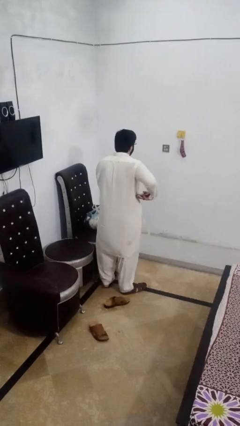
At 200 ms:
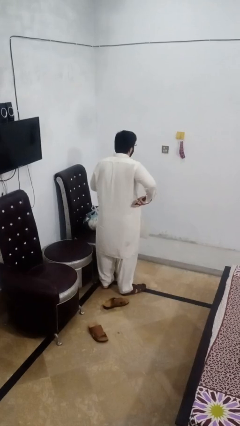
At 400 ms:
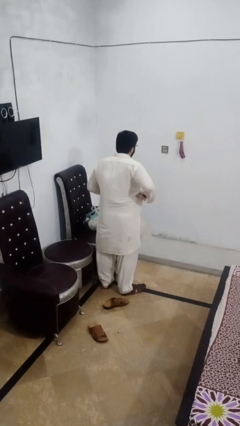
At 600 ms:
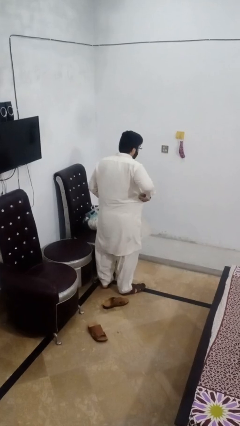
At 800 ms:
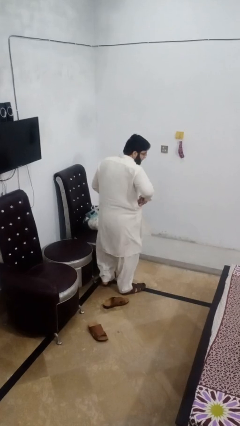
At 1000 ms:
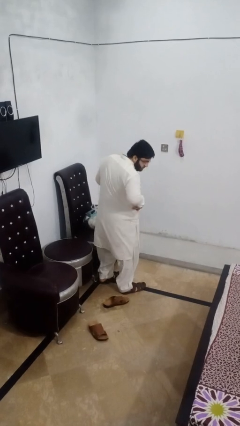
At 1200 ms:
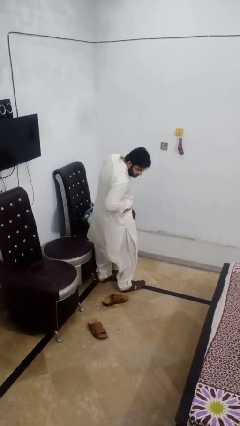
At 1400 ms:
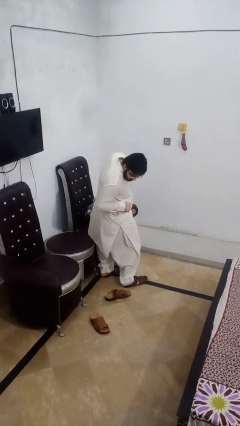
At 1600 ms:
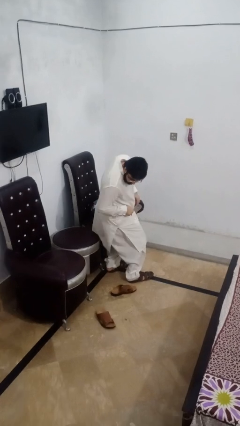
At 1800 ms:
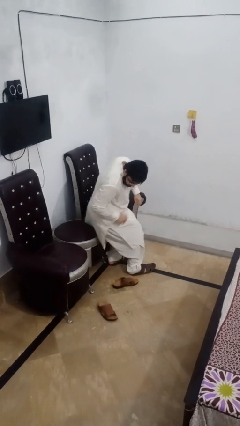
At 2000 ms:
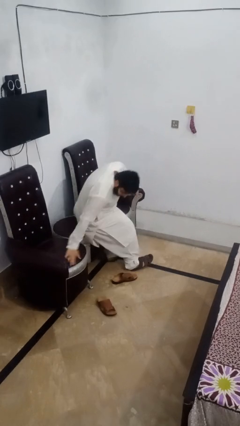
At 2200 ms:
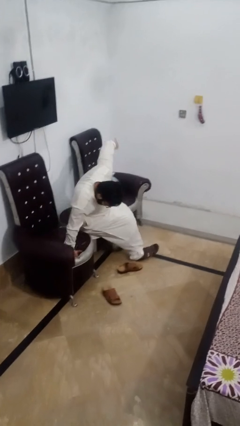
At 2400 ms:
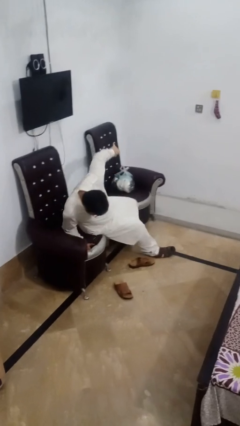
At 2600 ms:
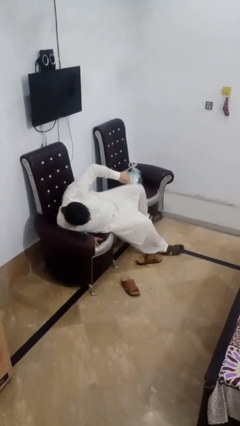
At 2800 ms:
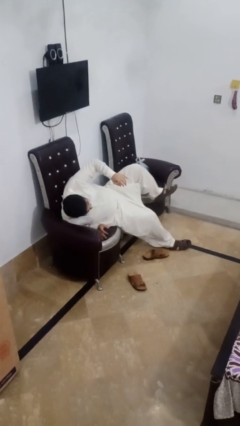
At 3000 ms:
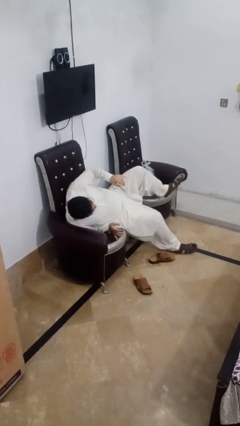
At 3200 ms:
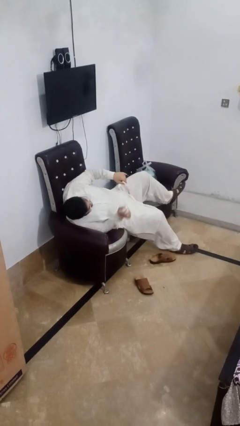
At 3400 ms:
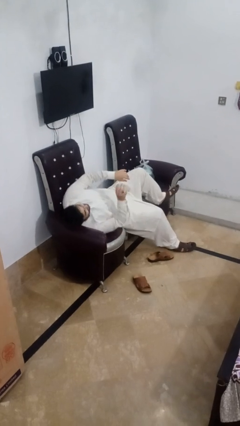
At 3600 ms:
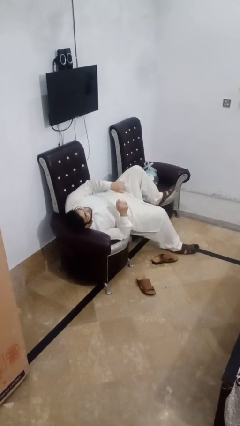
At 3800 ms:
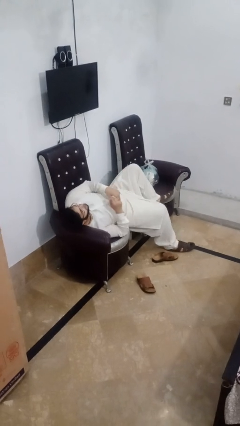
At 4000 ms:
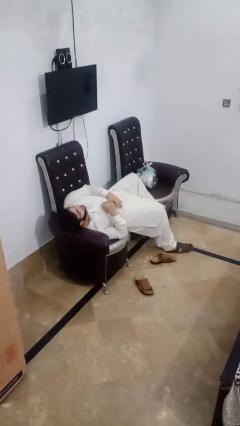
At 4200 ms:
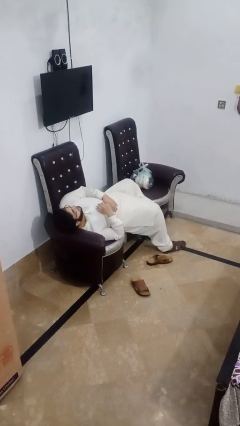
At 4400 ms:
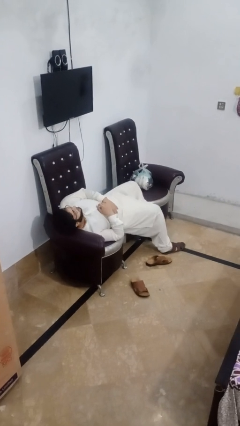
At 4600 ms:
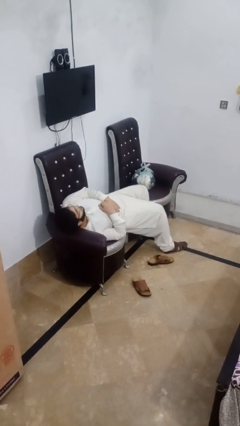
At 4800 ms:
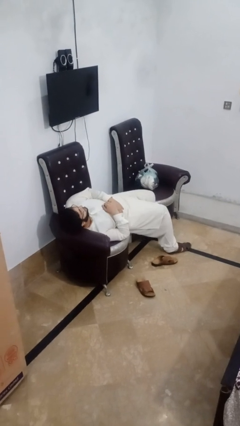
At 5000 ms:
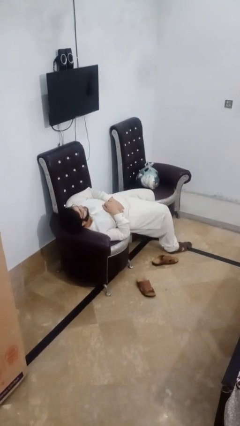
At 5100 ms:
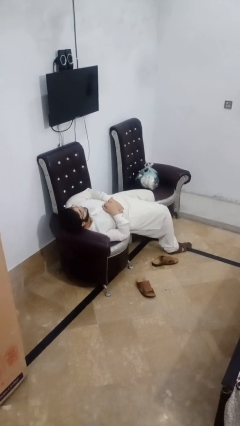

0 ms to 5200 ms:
person lies down on couch

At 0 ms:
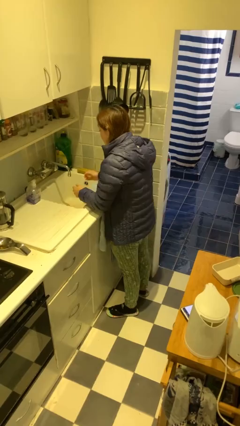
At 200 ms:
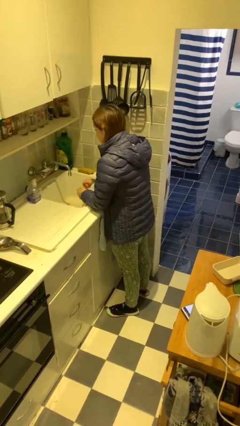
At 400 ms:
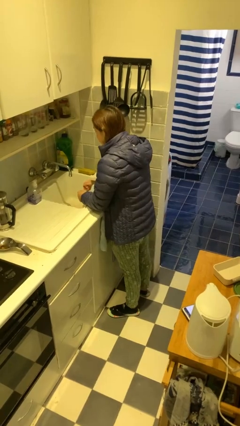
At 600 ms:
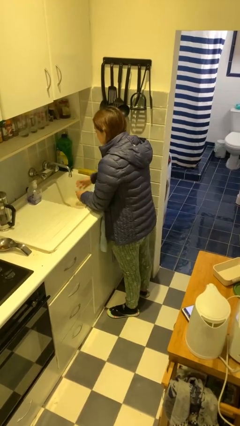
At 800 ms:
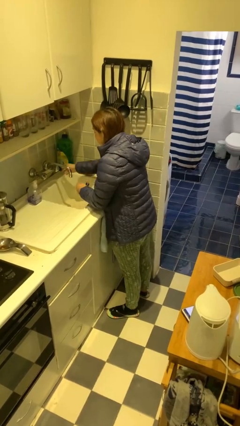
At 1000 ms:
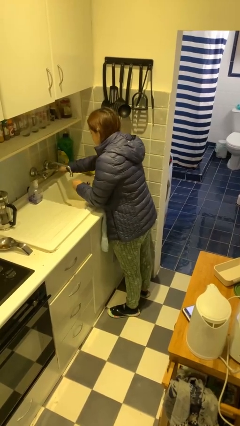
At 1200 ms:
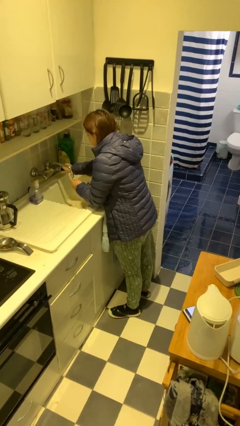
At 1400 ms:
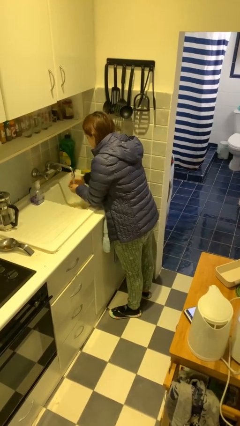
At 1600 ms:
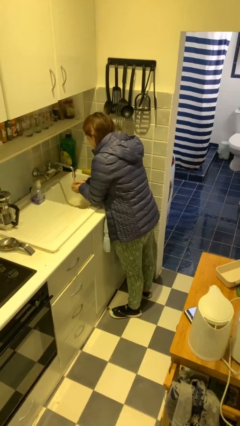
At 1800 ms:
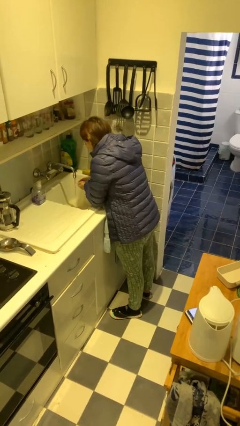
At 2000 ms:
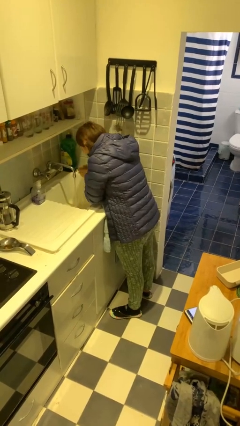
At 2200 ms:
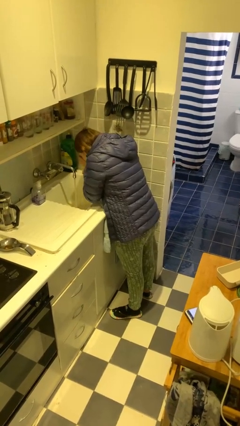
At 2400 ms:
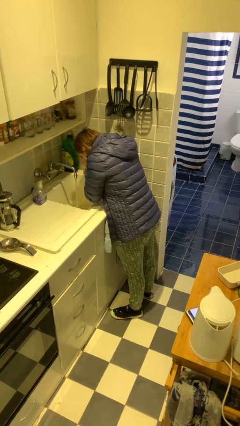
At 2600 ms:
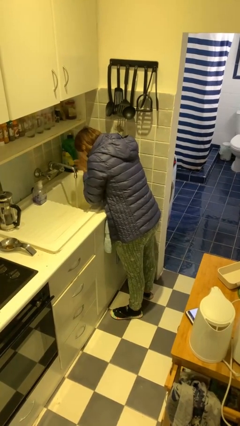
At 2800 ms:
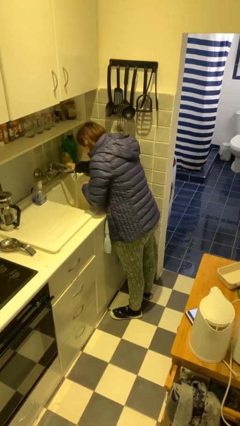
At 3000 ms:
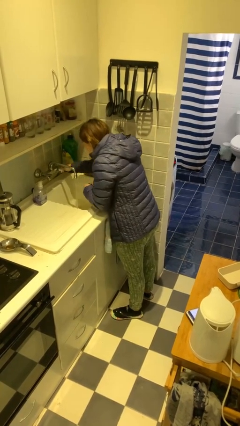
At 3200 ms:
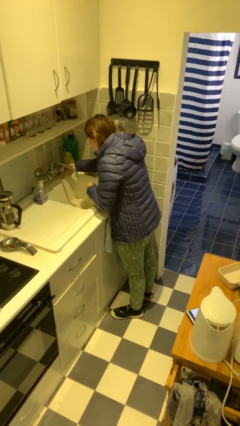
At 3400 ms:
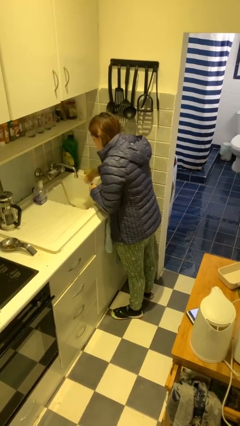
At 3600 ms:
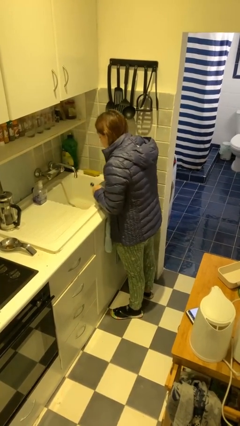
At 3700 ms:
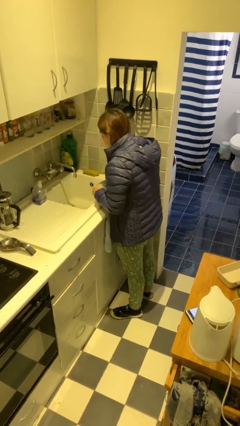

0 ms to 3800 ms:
person washes face

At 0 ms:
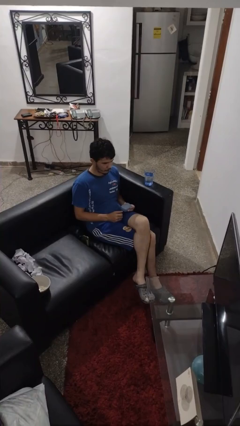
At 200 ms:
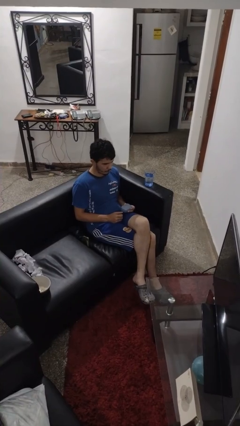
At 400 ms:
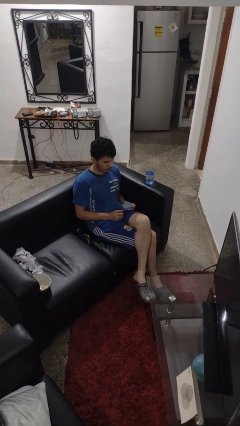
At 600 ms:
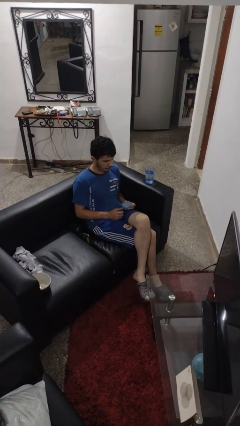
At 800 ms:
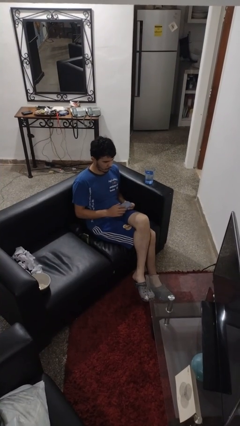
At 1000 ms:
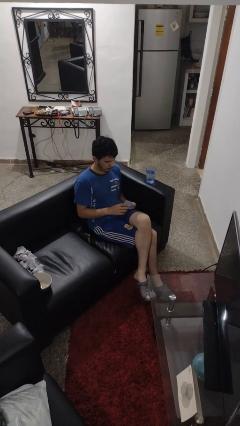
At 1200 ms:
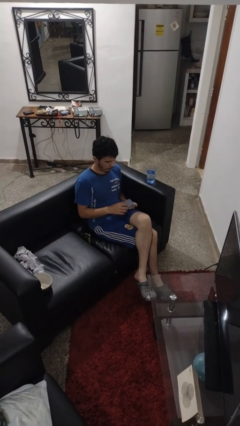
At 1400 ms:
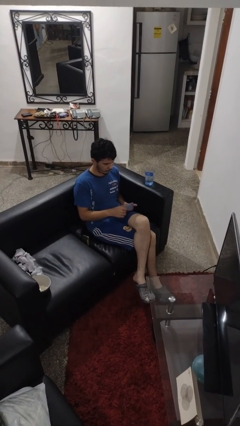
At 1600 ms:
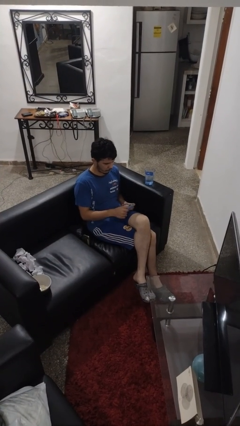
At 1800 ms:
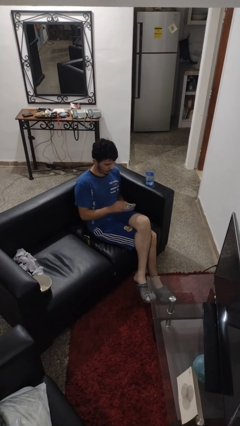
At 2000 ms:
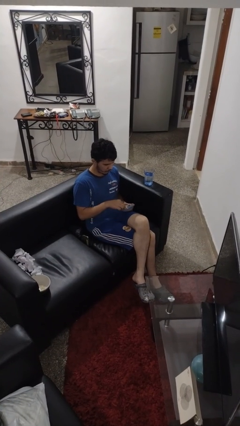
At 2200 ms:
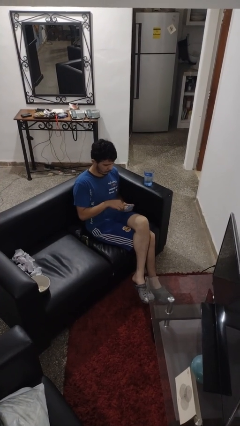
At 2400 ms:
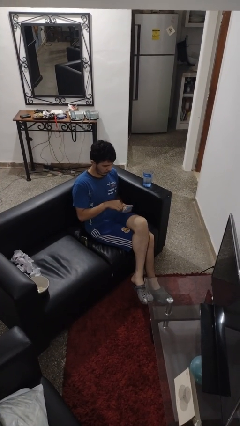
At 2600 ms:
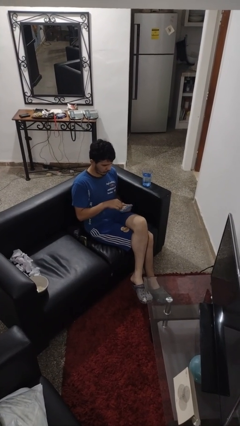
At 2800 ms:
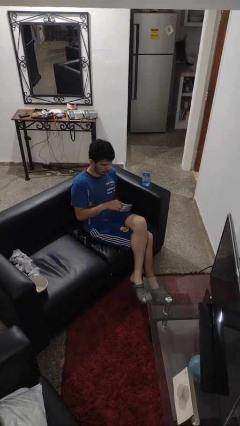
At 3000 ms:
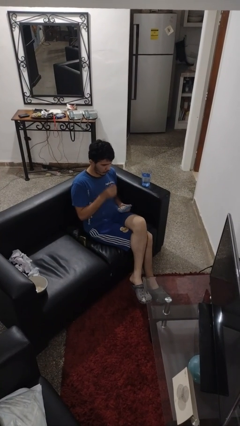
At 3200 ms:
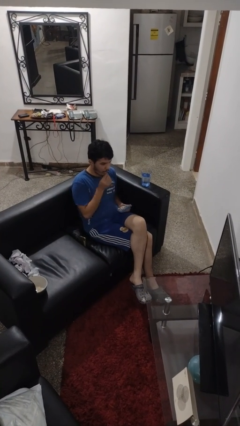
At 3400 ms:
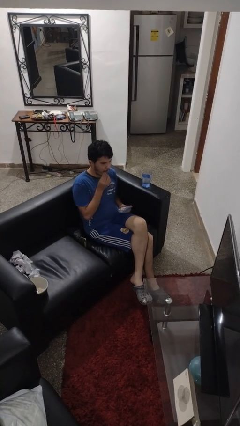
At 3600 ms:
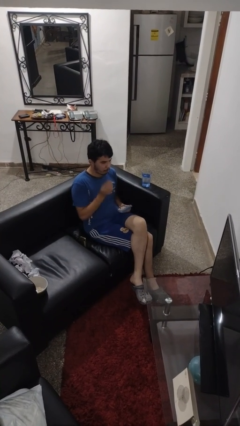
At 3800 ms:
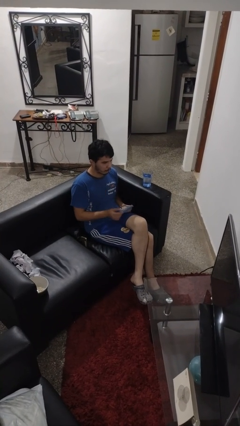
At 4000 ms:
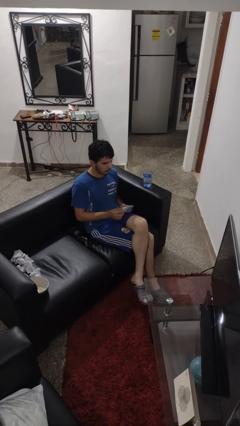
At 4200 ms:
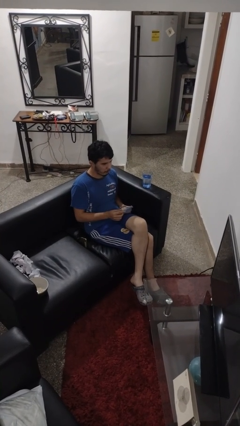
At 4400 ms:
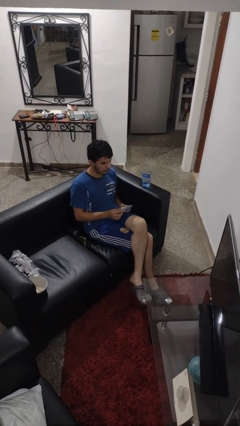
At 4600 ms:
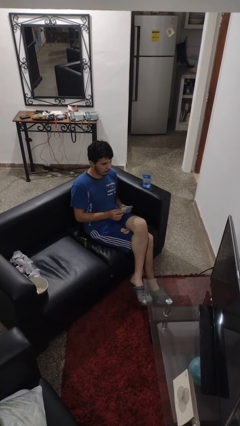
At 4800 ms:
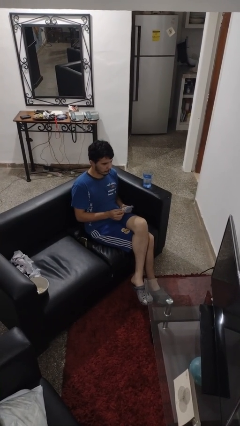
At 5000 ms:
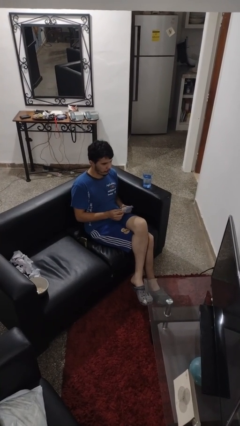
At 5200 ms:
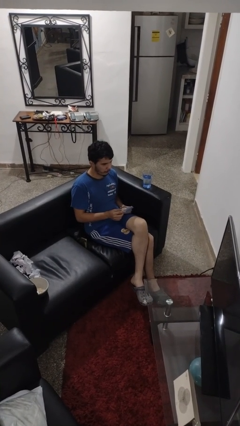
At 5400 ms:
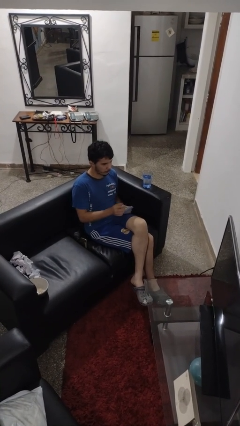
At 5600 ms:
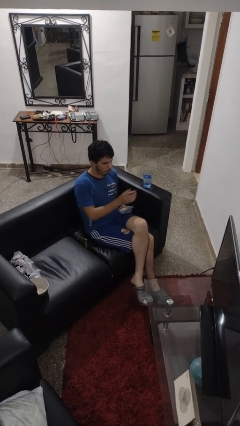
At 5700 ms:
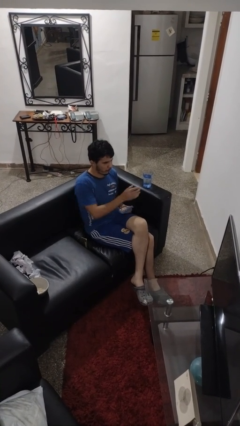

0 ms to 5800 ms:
person takes medicine pills

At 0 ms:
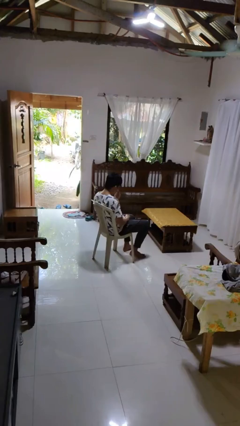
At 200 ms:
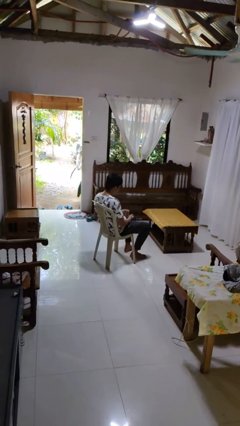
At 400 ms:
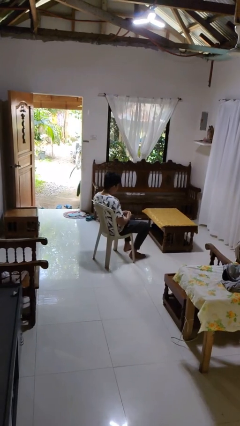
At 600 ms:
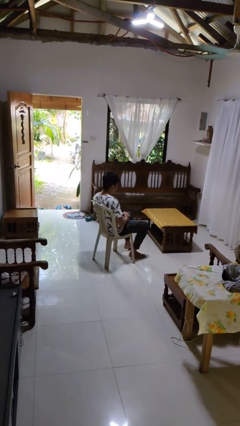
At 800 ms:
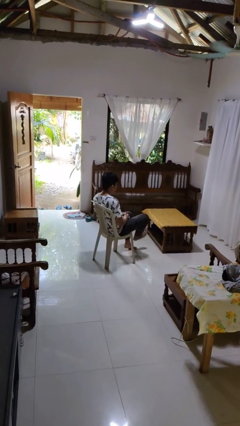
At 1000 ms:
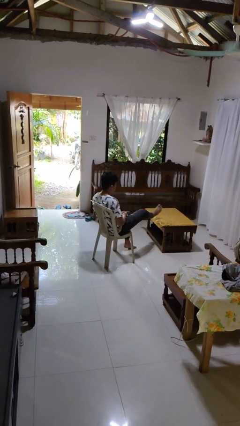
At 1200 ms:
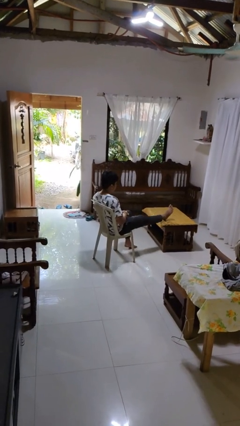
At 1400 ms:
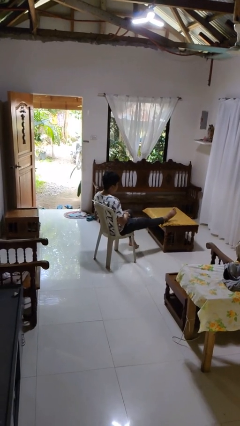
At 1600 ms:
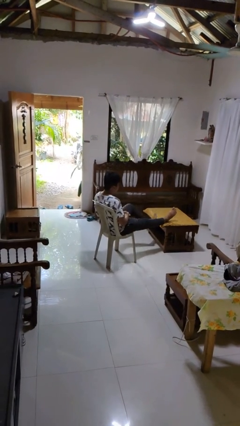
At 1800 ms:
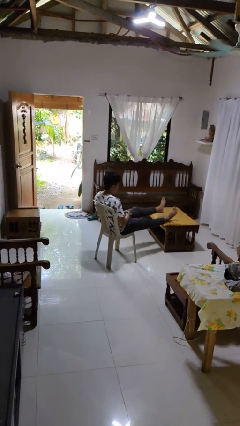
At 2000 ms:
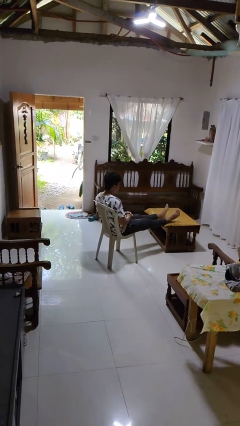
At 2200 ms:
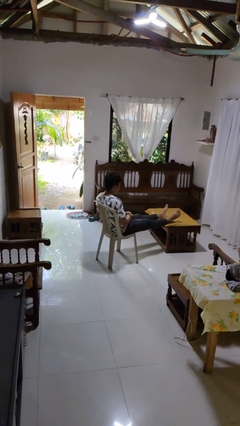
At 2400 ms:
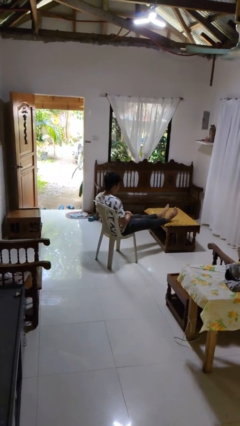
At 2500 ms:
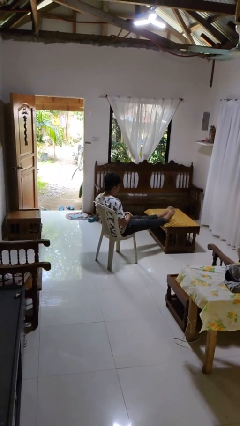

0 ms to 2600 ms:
person puts feet up

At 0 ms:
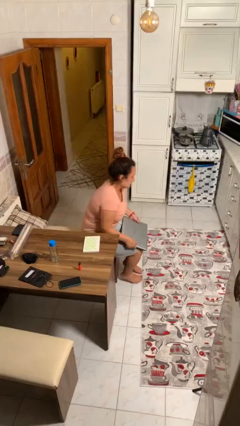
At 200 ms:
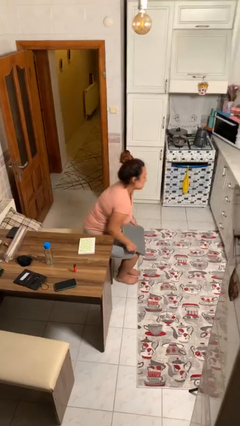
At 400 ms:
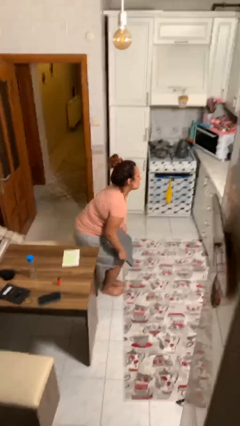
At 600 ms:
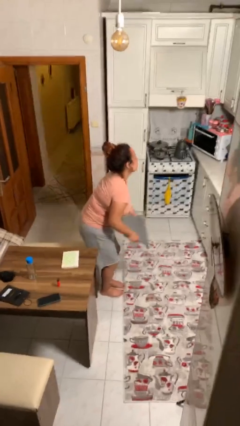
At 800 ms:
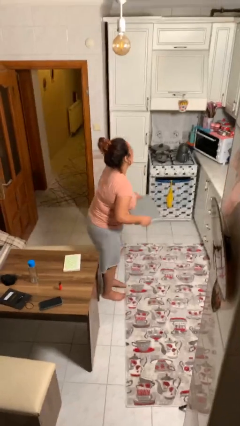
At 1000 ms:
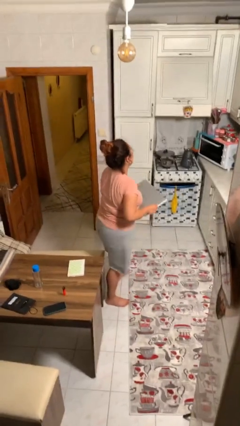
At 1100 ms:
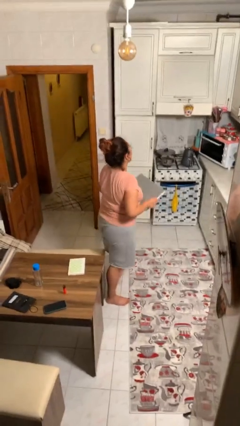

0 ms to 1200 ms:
person stands up
